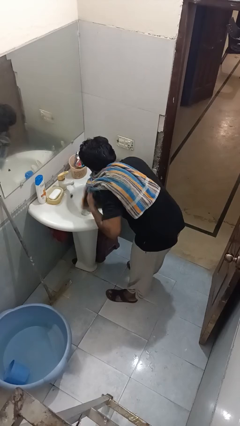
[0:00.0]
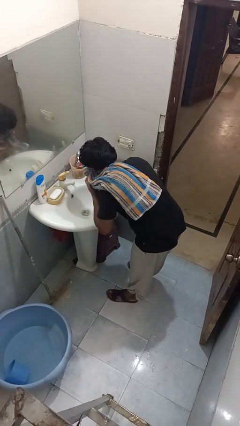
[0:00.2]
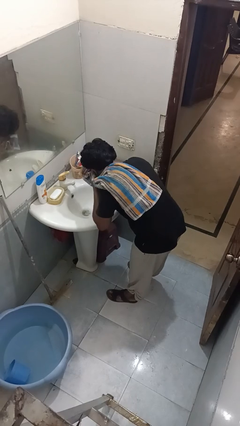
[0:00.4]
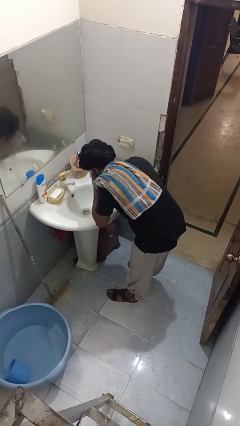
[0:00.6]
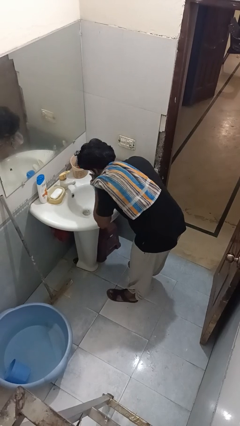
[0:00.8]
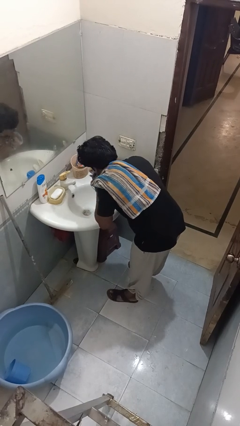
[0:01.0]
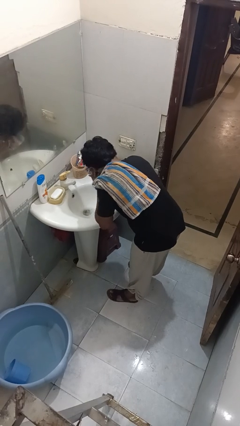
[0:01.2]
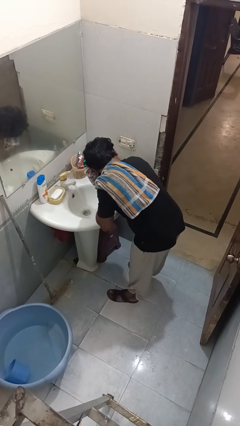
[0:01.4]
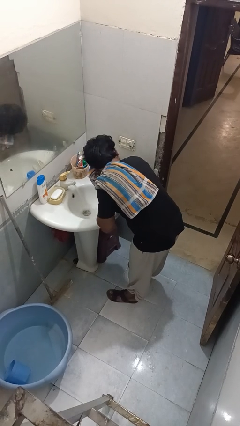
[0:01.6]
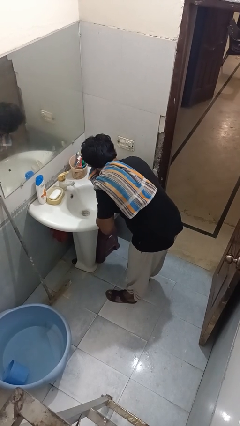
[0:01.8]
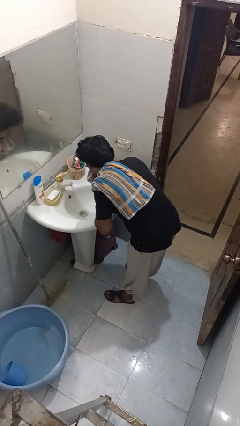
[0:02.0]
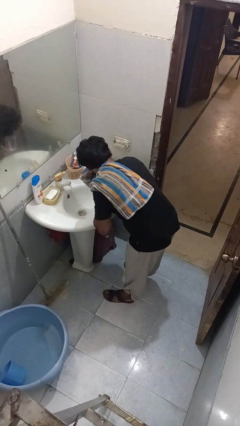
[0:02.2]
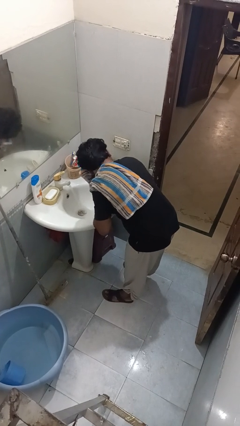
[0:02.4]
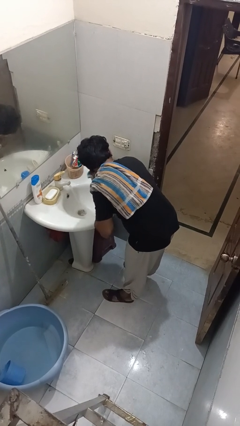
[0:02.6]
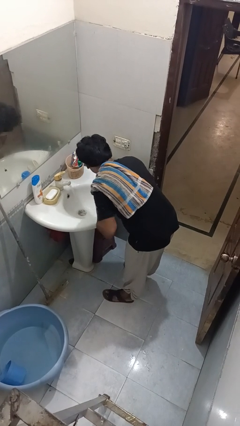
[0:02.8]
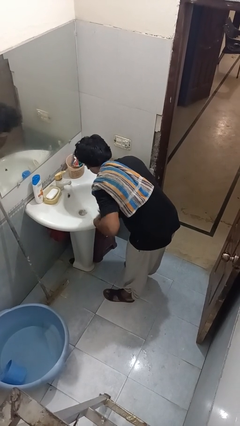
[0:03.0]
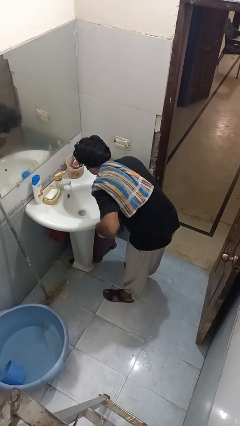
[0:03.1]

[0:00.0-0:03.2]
person dries face with towel

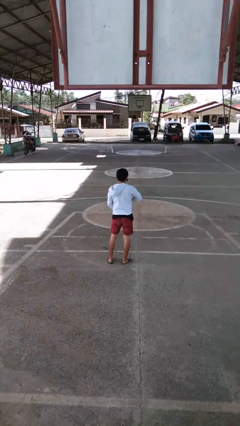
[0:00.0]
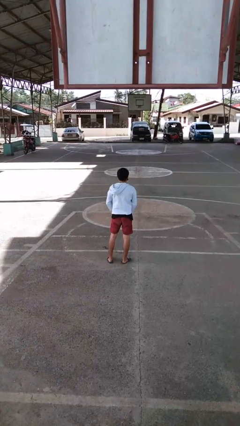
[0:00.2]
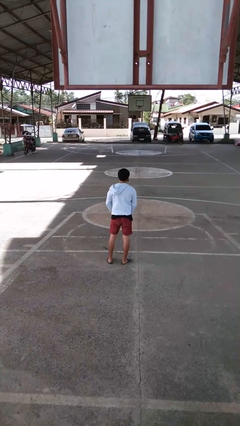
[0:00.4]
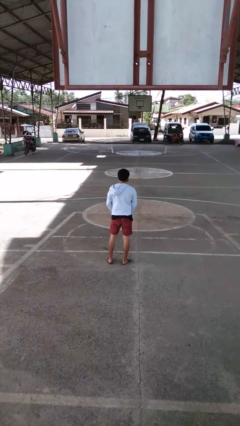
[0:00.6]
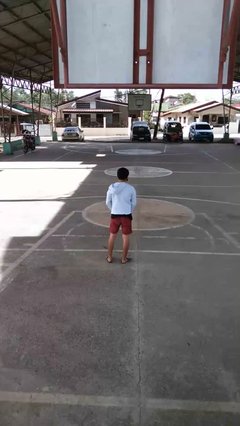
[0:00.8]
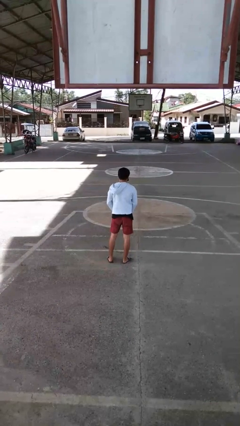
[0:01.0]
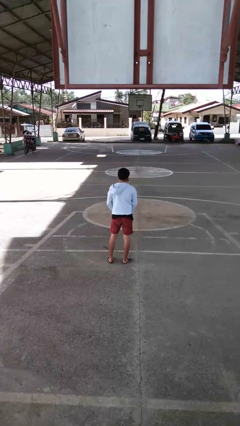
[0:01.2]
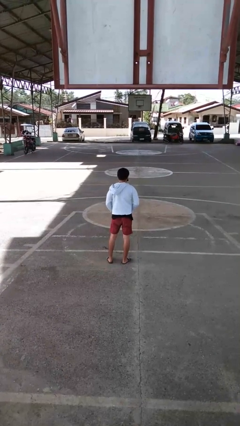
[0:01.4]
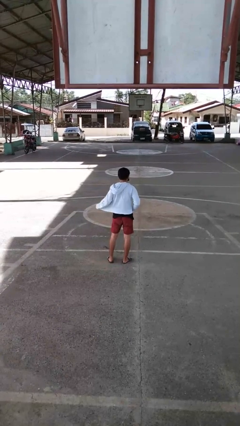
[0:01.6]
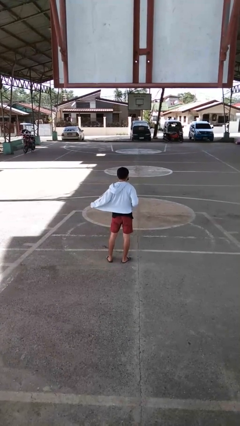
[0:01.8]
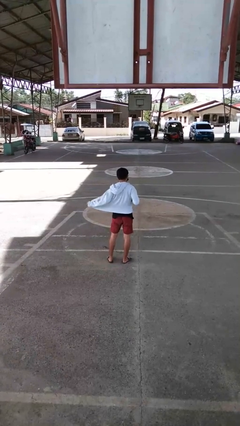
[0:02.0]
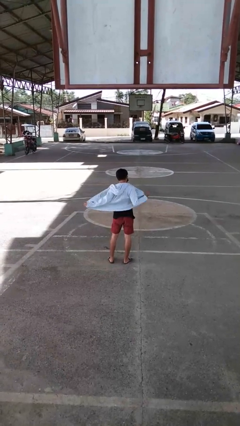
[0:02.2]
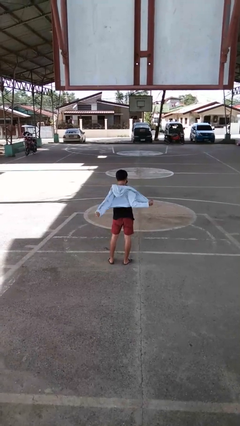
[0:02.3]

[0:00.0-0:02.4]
person unzips jacket

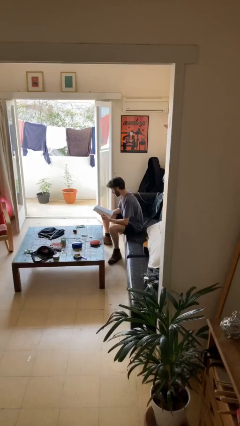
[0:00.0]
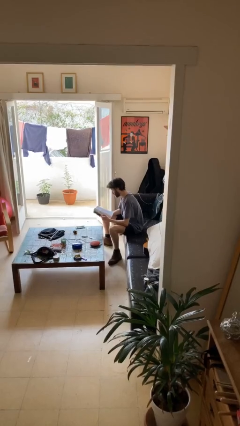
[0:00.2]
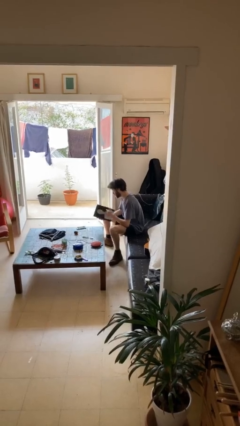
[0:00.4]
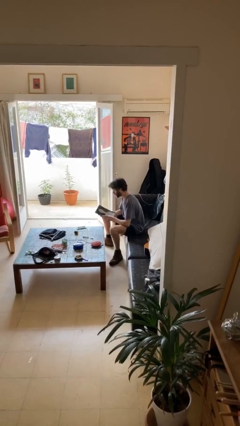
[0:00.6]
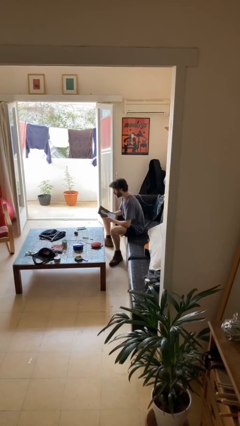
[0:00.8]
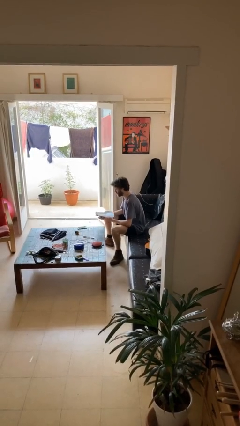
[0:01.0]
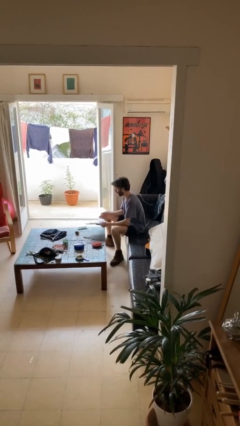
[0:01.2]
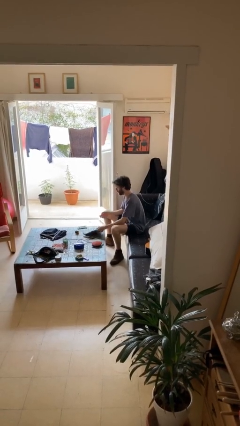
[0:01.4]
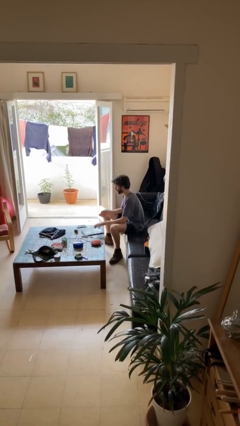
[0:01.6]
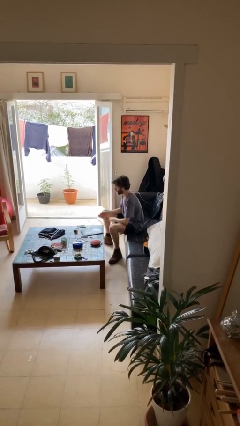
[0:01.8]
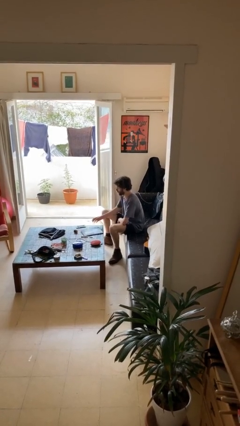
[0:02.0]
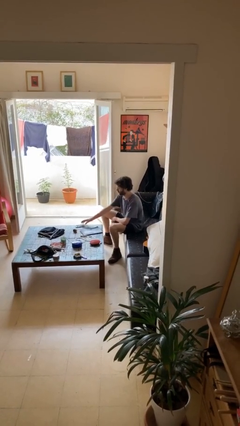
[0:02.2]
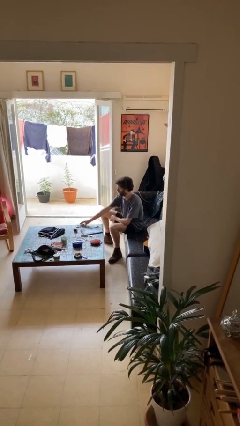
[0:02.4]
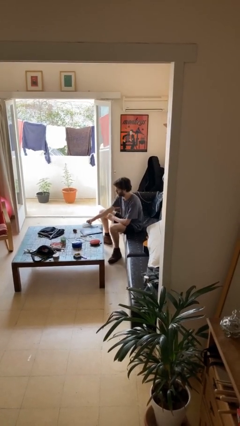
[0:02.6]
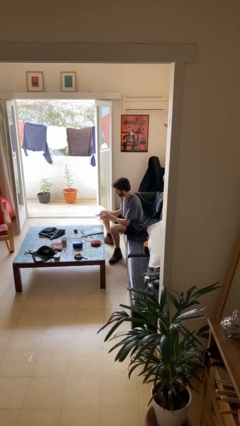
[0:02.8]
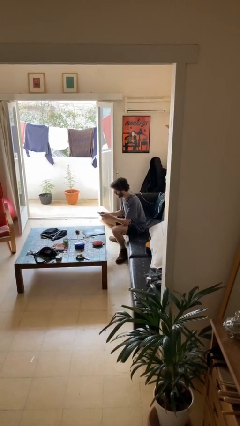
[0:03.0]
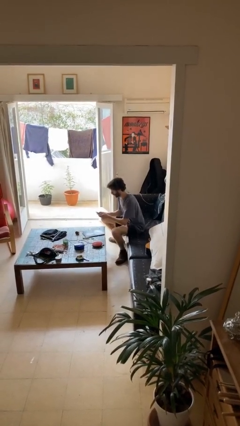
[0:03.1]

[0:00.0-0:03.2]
person puts down object on table

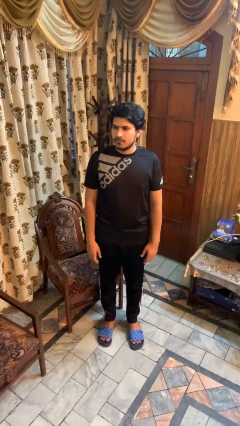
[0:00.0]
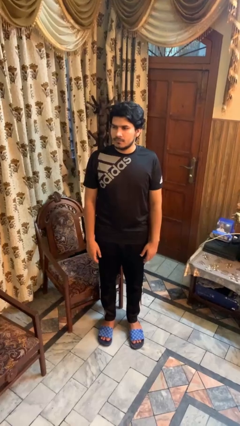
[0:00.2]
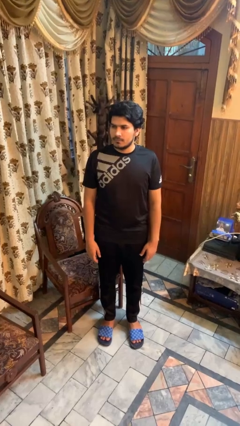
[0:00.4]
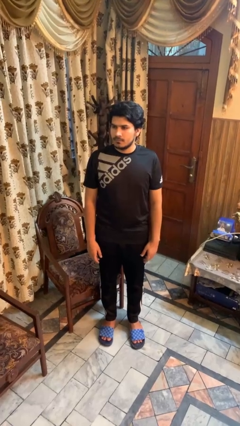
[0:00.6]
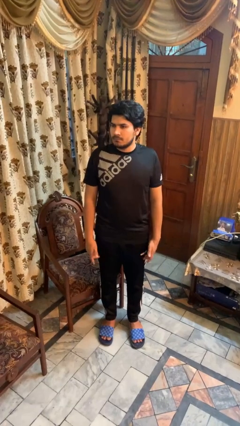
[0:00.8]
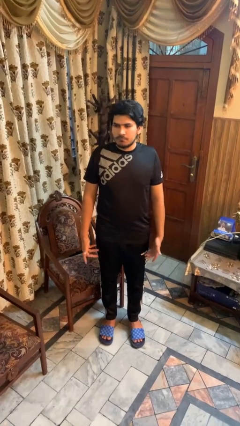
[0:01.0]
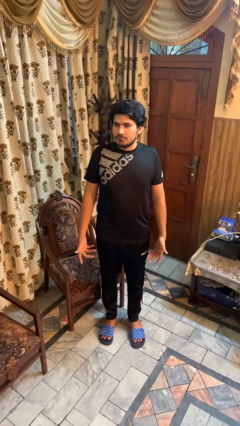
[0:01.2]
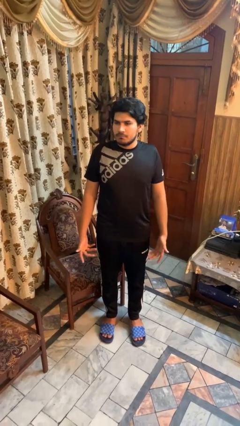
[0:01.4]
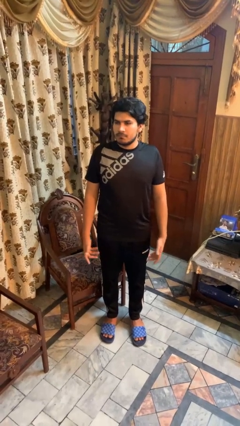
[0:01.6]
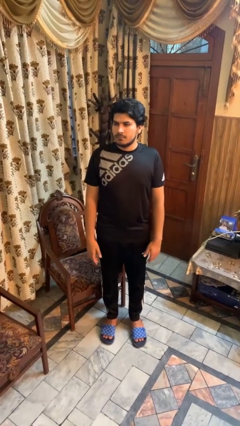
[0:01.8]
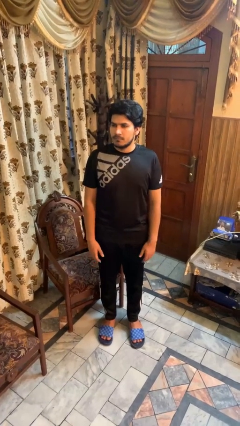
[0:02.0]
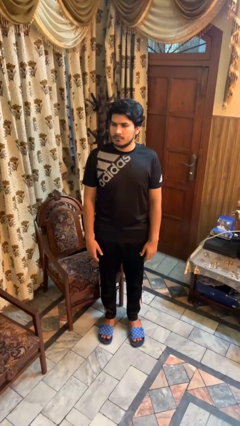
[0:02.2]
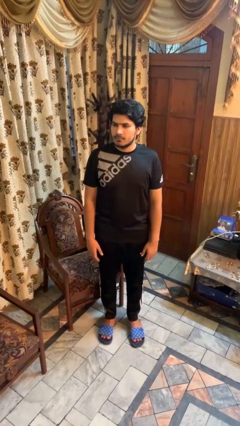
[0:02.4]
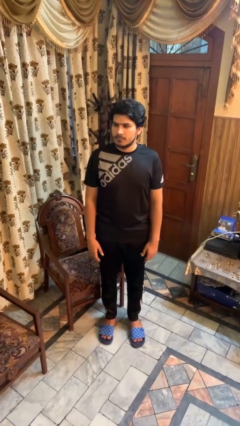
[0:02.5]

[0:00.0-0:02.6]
person shrugs

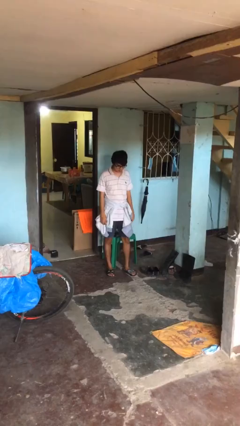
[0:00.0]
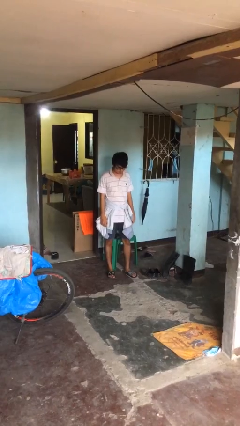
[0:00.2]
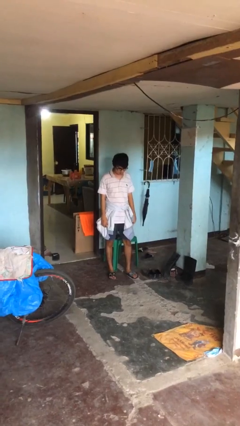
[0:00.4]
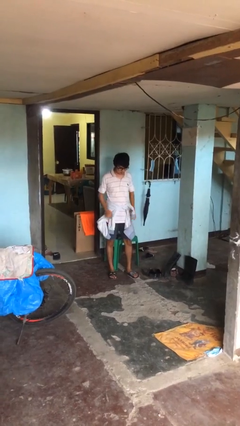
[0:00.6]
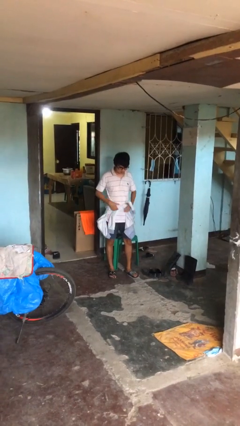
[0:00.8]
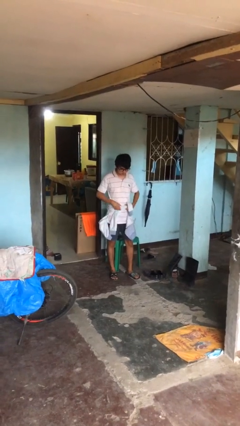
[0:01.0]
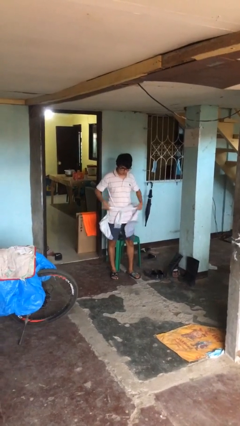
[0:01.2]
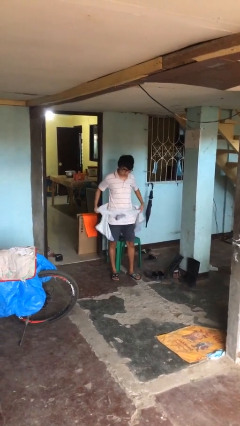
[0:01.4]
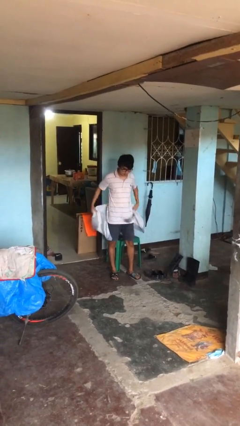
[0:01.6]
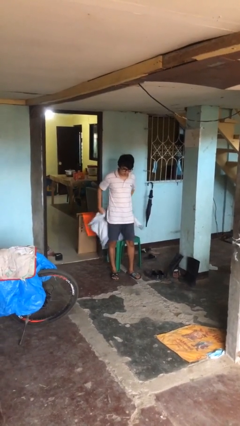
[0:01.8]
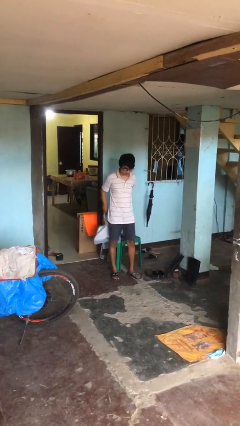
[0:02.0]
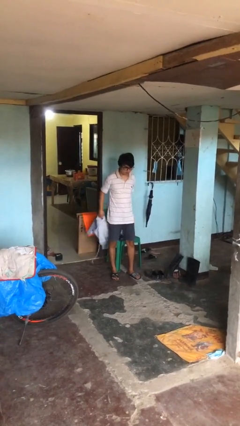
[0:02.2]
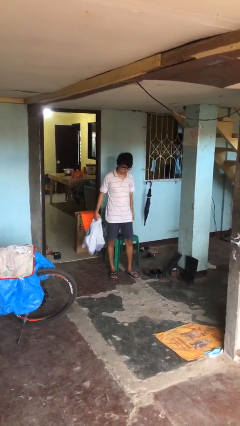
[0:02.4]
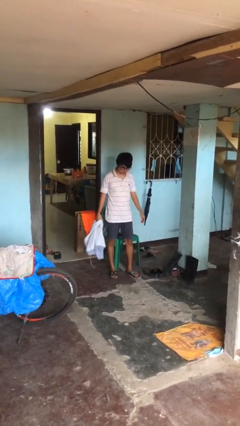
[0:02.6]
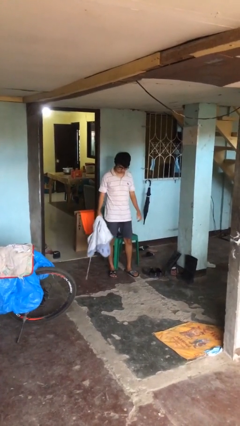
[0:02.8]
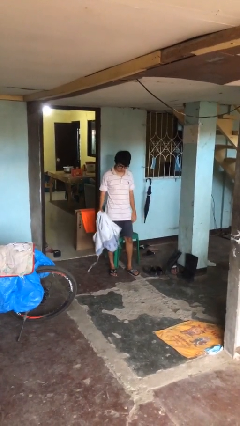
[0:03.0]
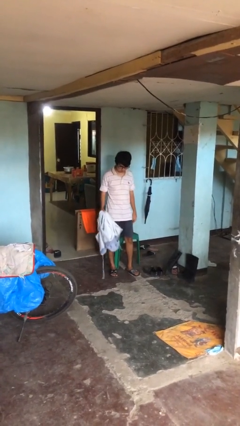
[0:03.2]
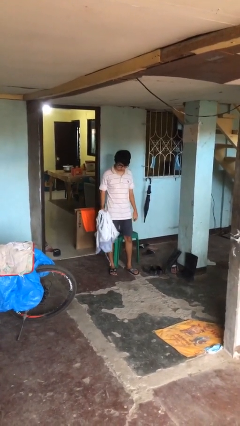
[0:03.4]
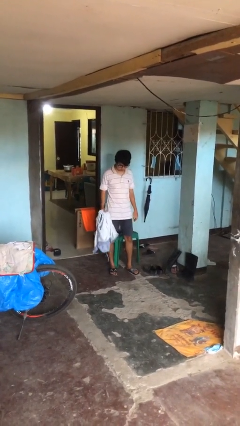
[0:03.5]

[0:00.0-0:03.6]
person unties jacket around waist

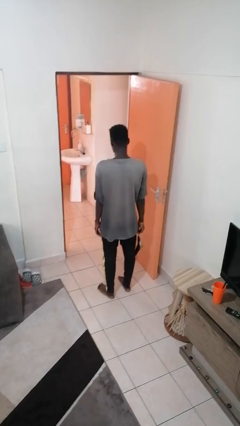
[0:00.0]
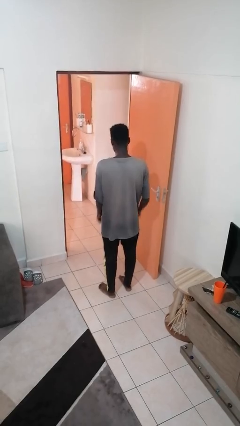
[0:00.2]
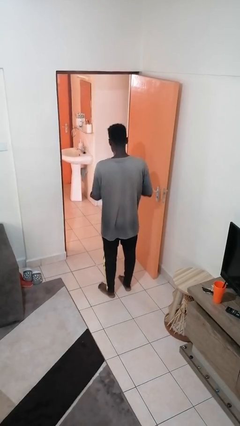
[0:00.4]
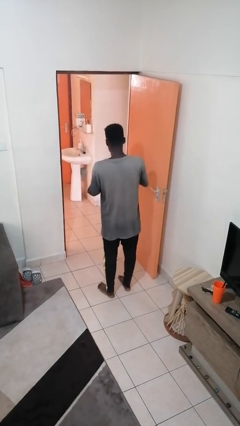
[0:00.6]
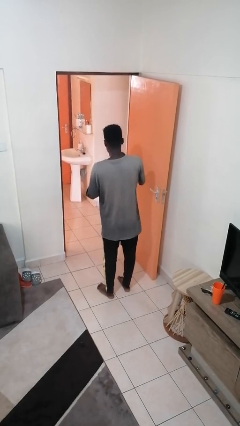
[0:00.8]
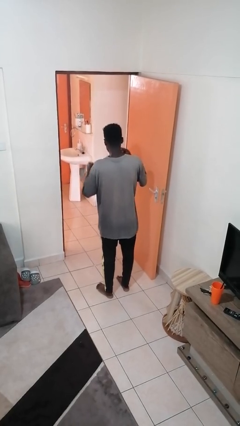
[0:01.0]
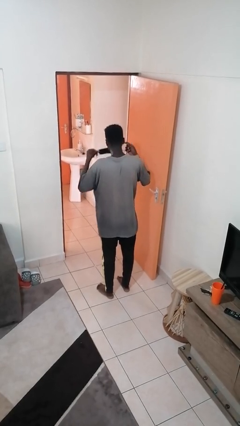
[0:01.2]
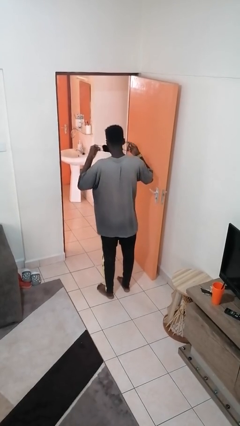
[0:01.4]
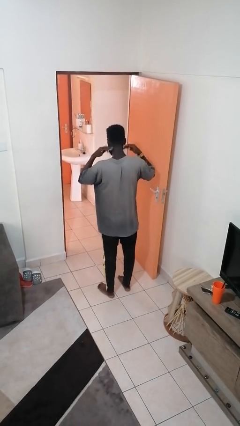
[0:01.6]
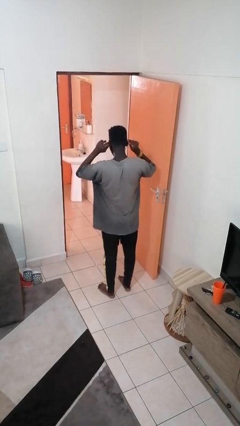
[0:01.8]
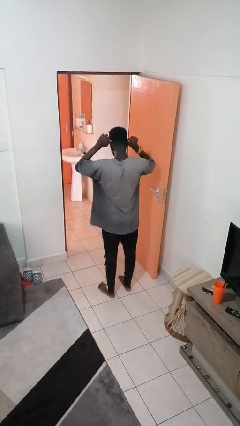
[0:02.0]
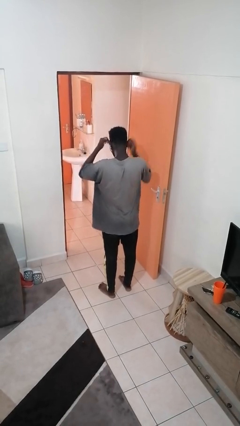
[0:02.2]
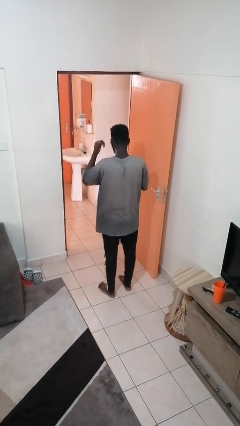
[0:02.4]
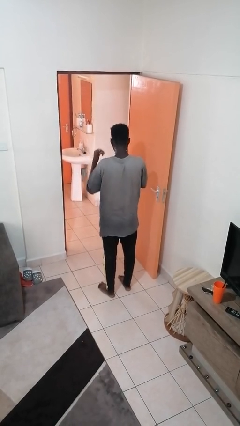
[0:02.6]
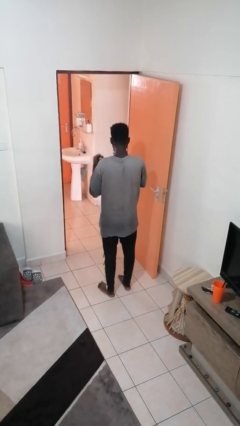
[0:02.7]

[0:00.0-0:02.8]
person puts on facemask
